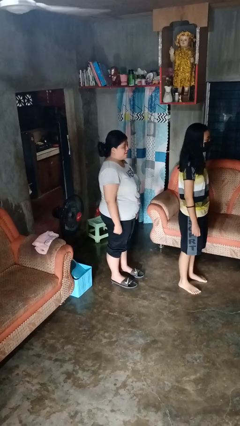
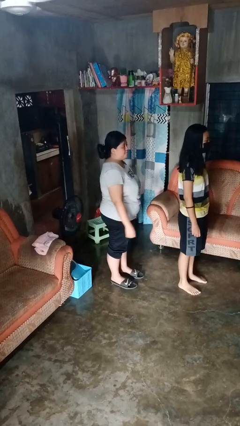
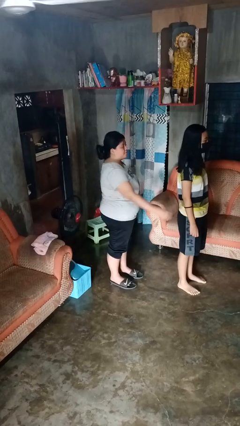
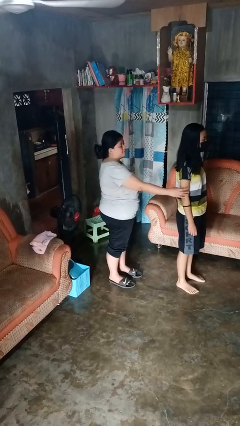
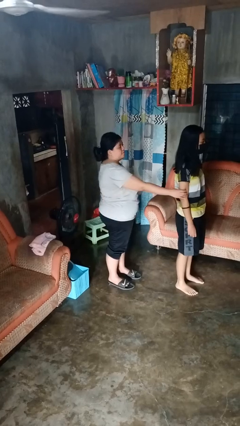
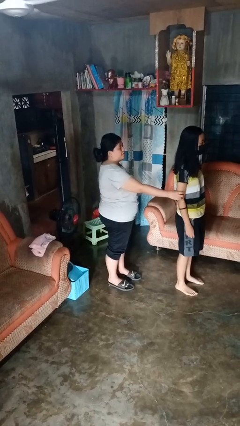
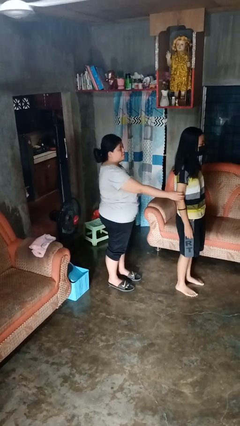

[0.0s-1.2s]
person grabs person by shoulder

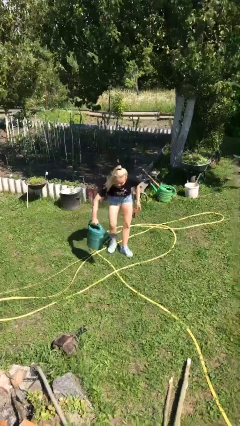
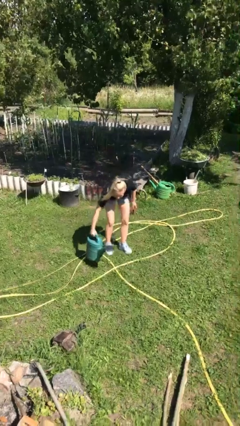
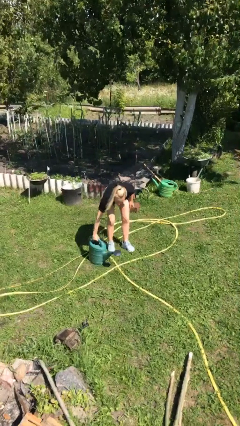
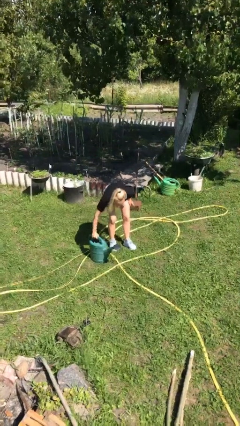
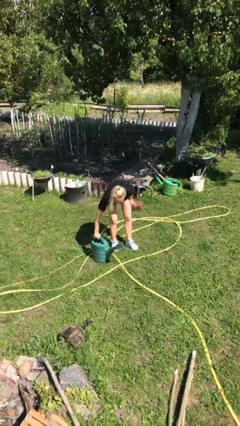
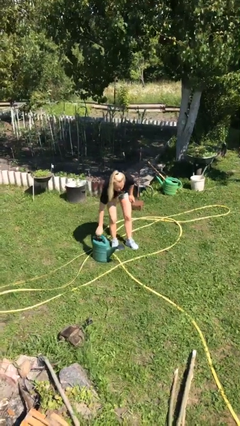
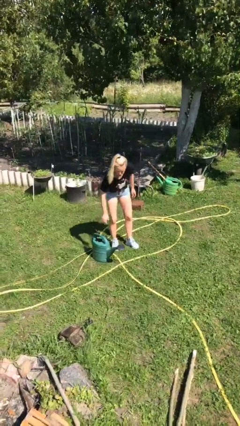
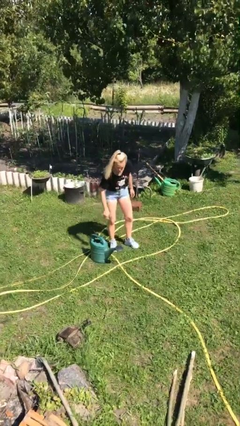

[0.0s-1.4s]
person puts down object on floor

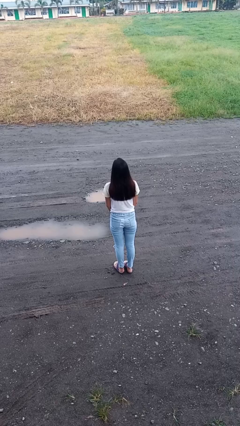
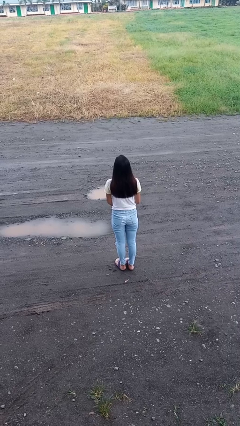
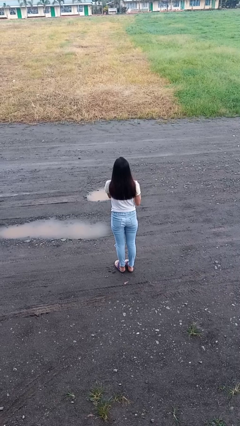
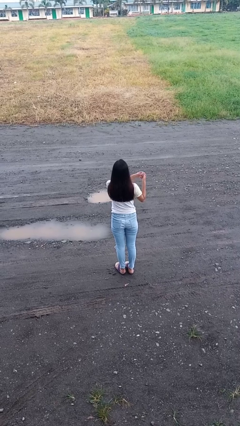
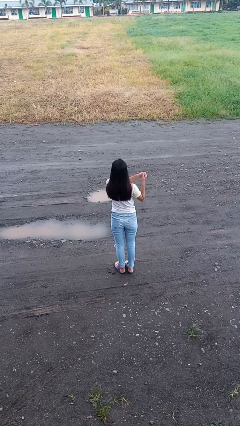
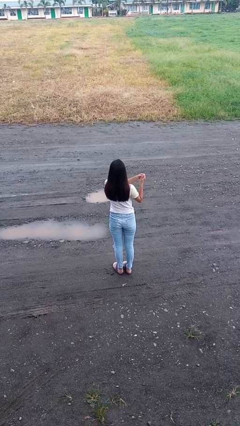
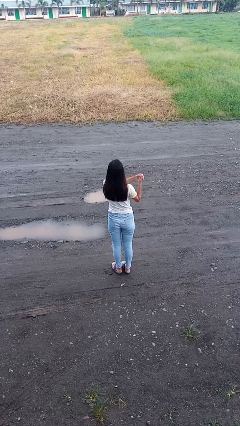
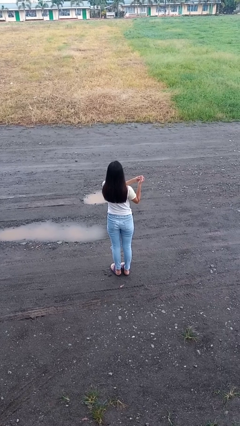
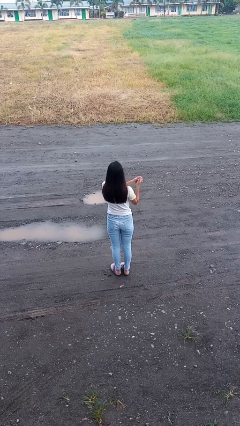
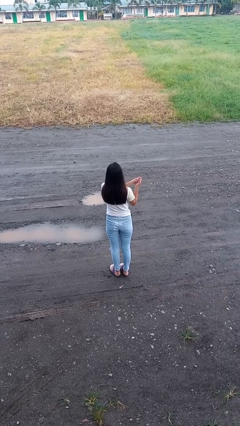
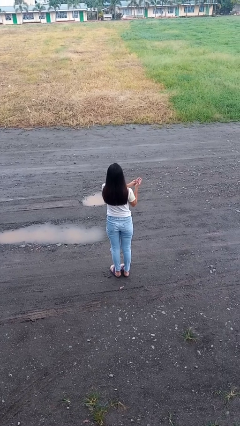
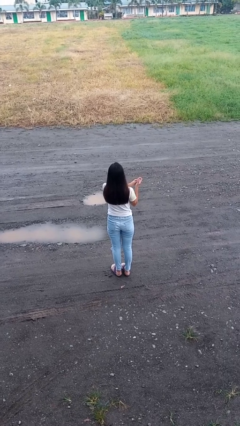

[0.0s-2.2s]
person cracks knuckles

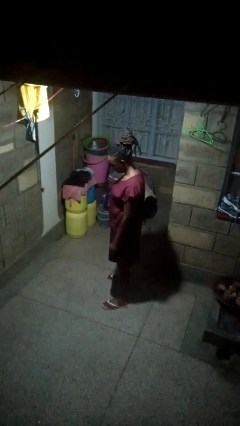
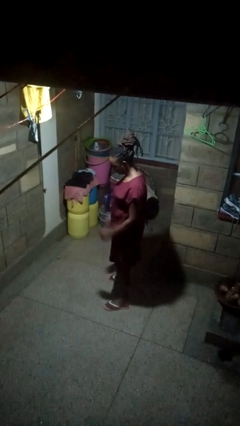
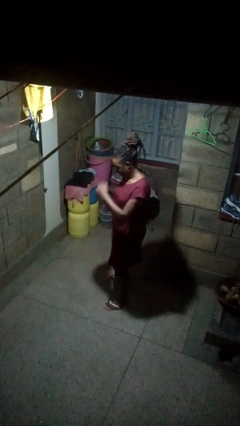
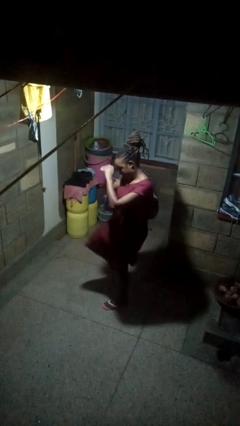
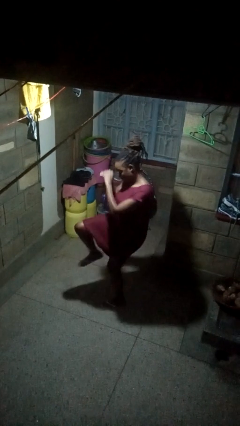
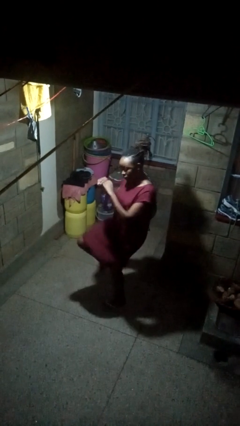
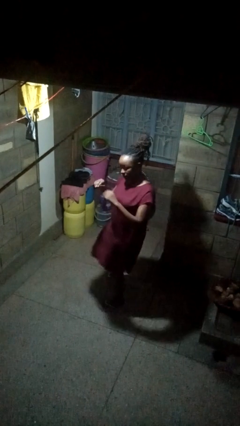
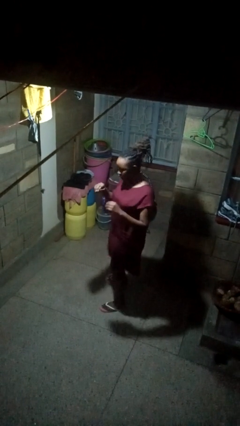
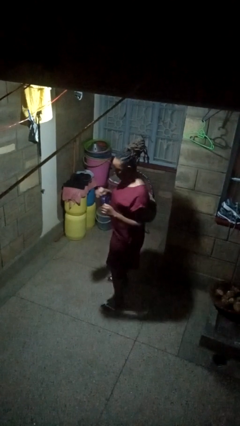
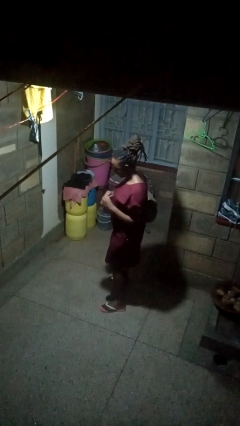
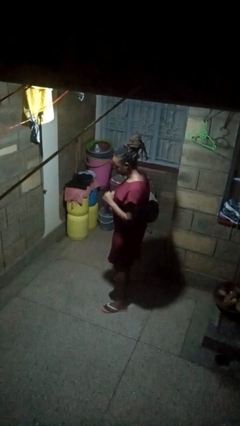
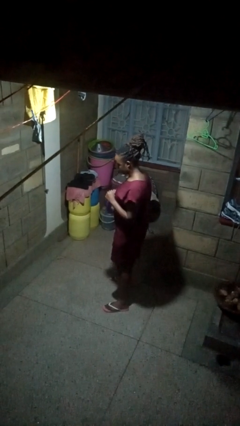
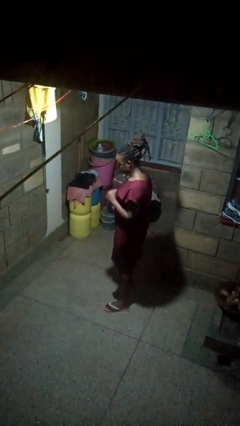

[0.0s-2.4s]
person karate kicks

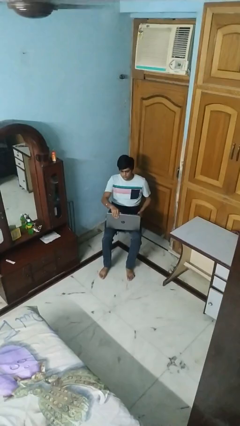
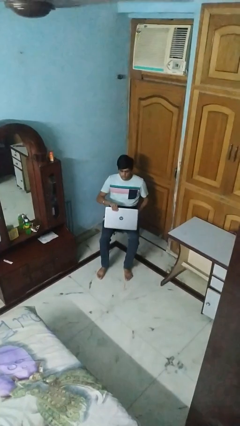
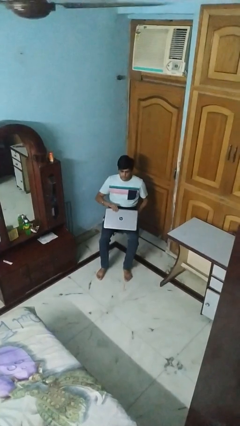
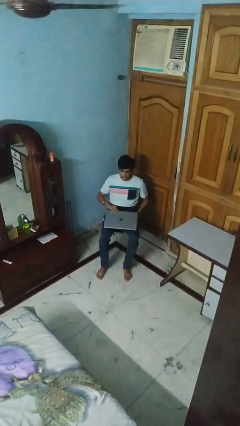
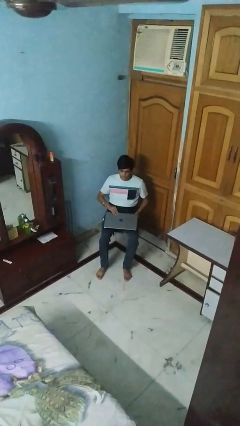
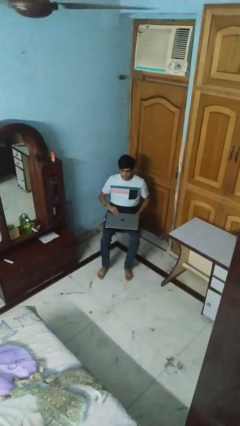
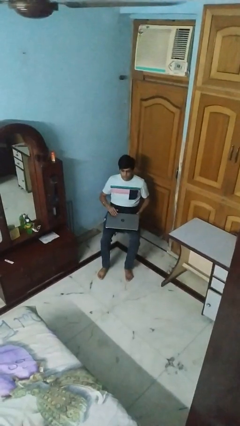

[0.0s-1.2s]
person closes laptop

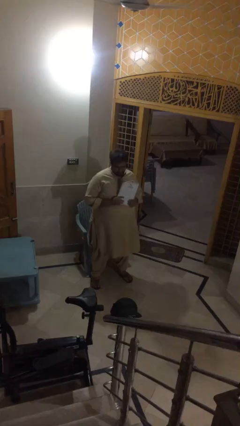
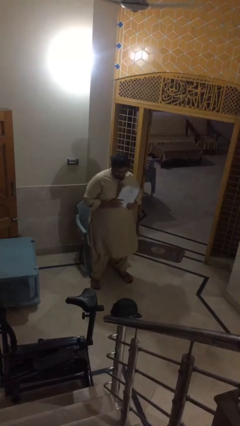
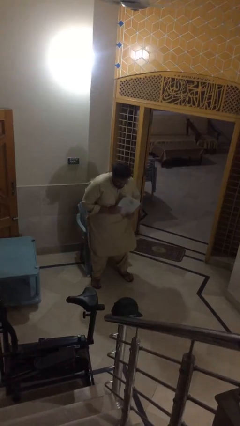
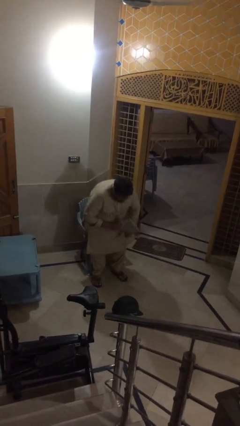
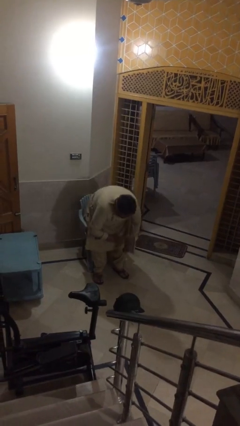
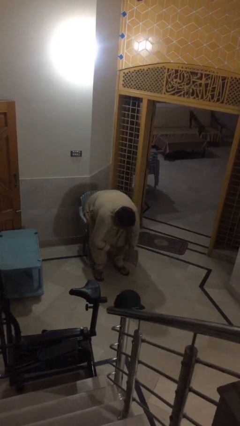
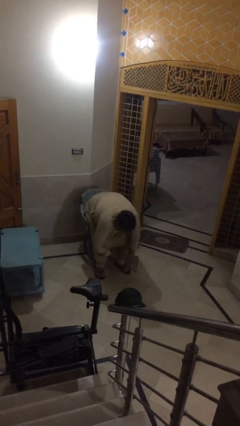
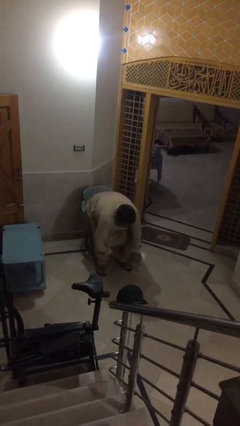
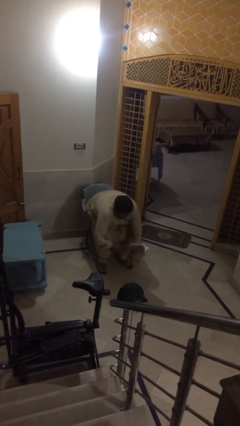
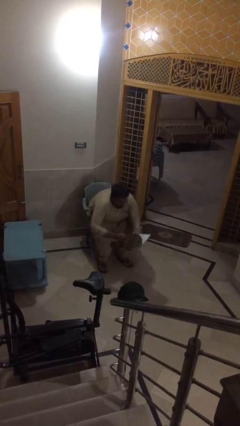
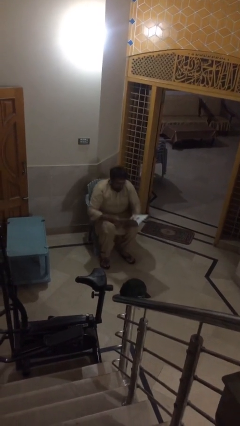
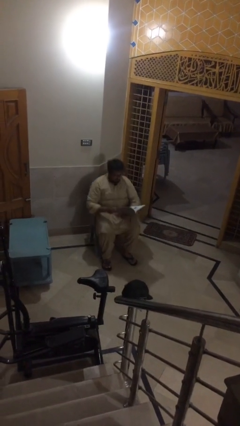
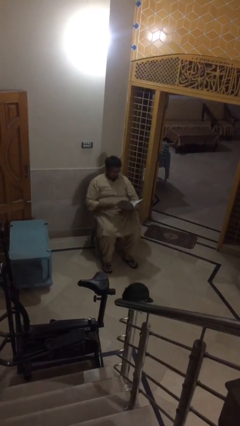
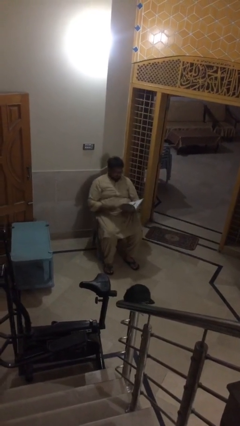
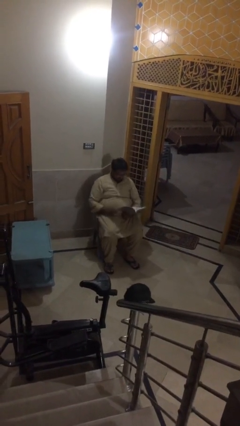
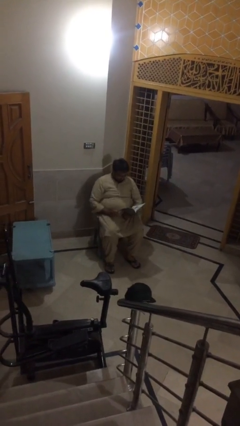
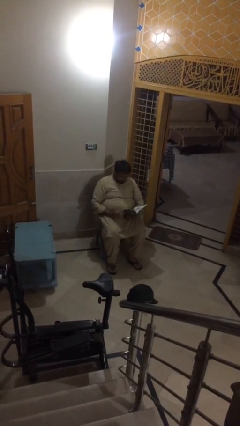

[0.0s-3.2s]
person sits down

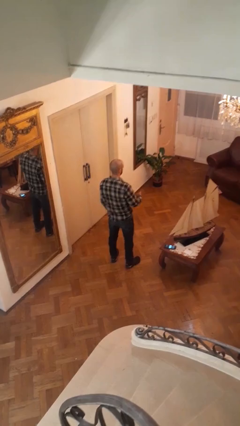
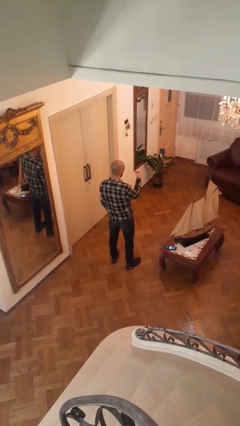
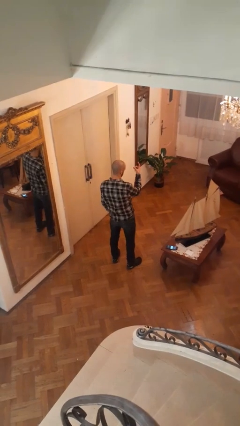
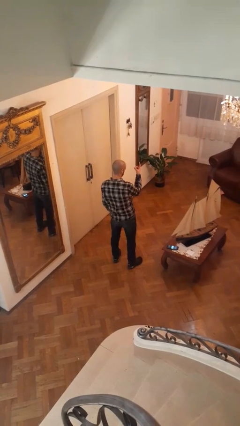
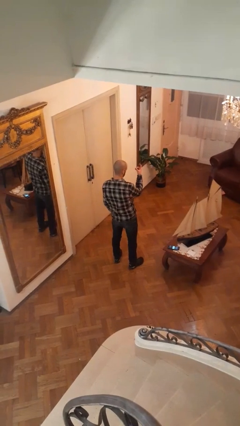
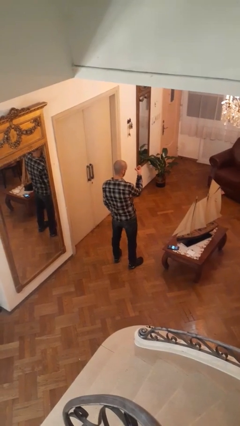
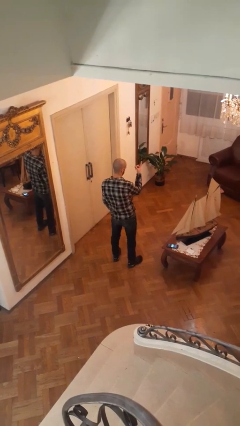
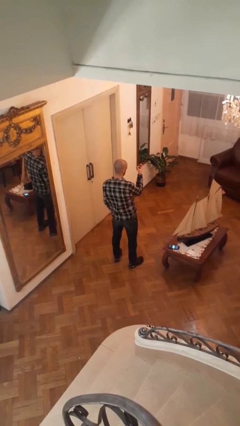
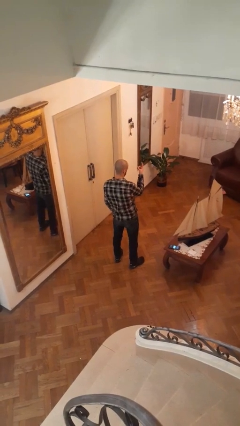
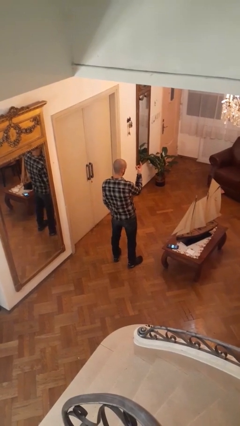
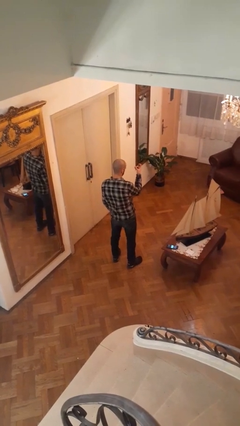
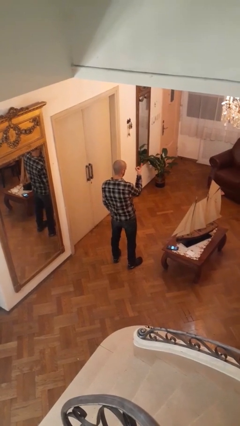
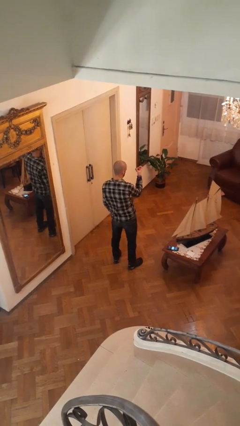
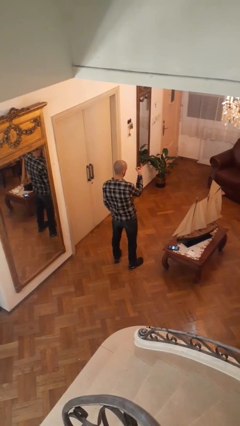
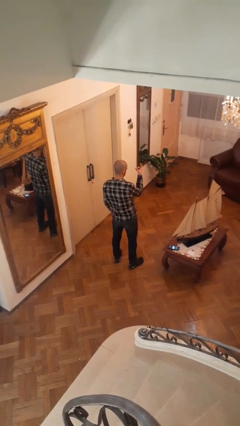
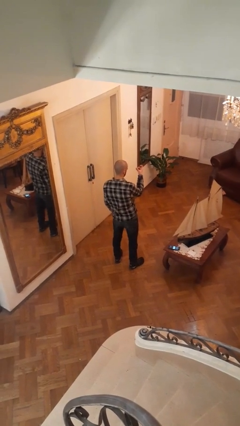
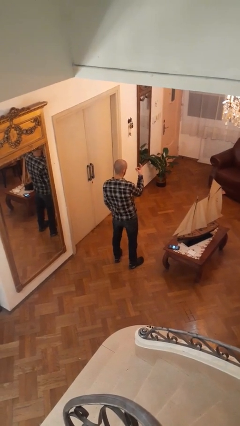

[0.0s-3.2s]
person gestures come here

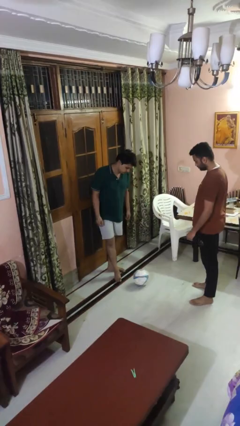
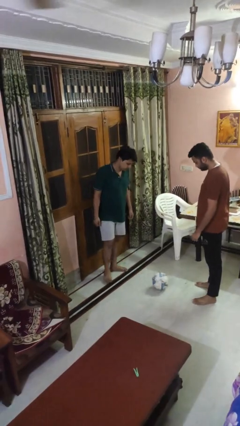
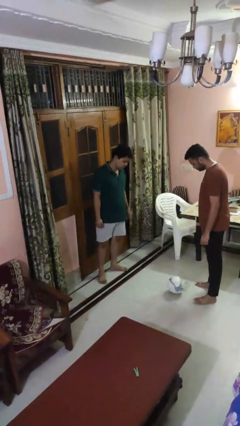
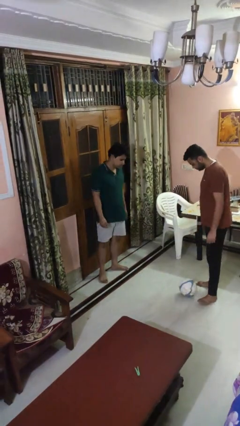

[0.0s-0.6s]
person kicks object to person

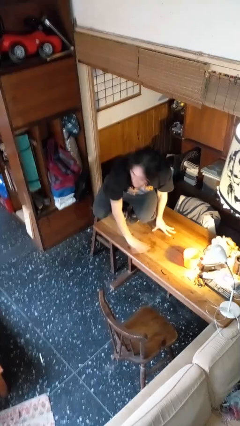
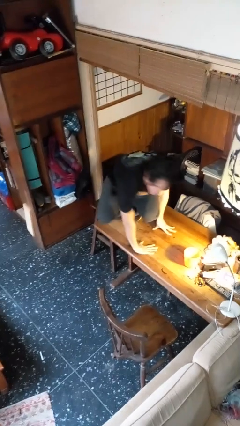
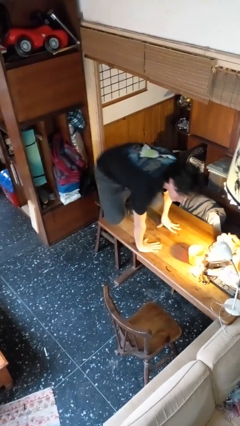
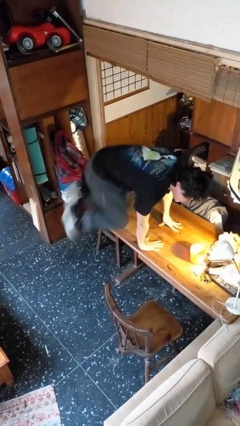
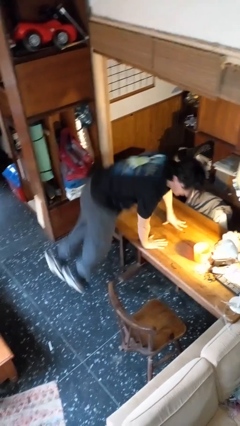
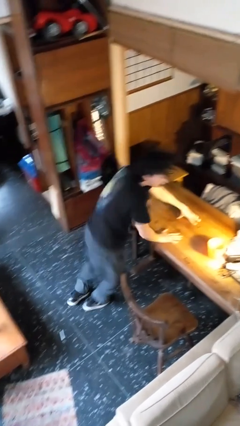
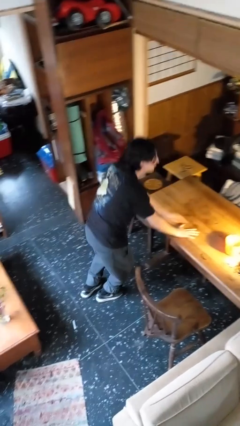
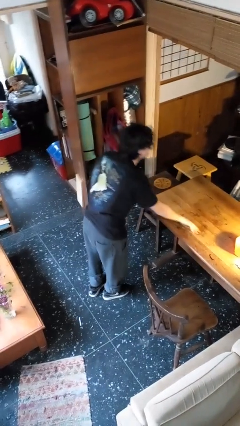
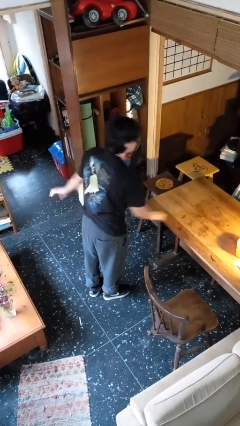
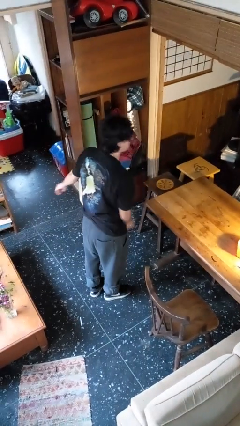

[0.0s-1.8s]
person climbs off table
